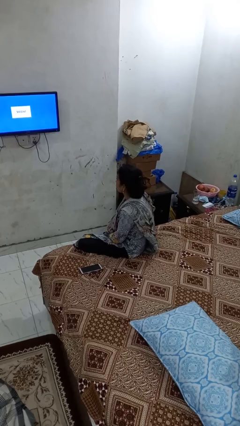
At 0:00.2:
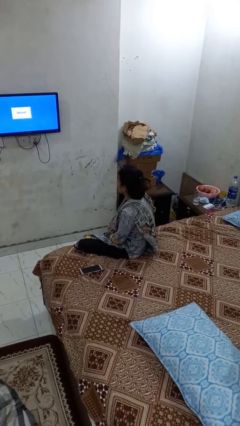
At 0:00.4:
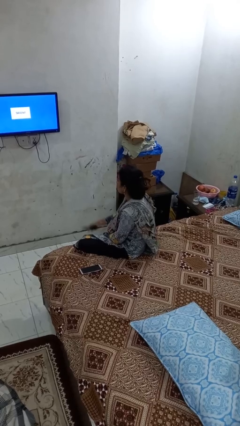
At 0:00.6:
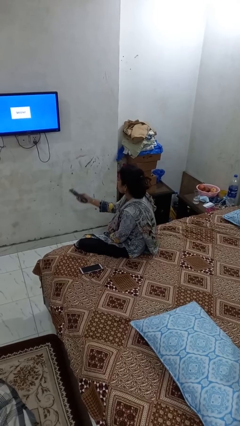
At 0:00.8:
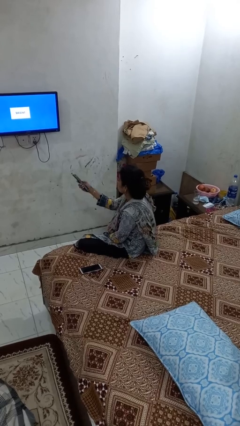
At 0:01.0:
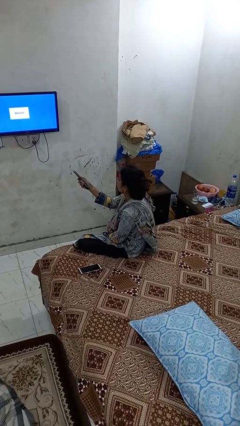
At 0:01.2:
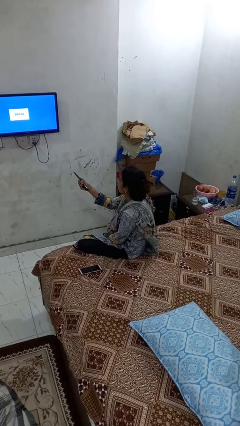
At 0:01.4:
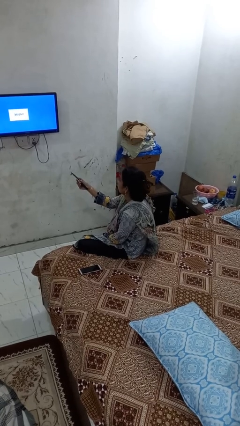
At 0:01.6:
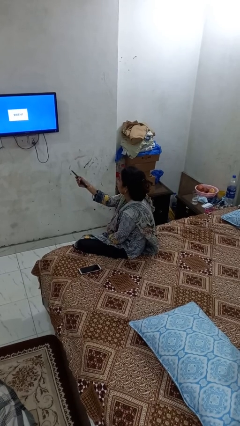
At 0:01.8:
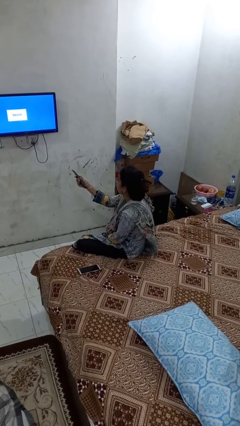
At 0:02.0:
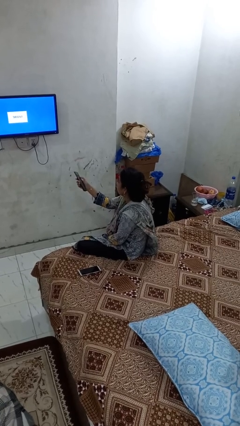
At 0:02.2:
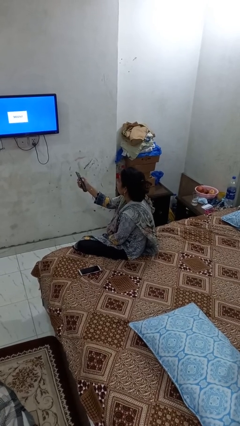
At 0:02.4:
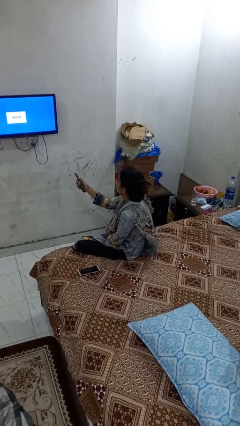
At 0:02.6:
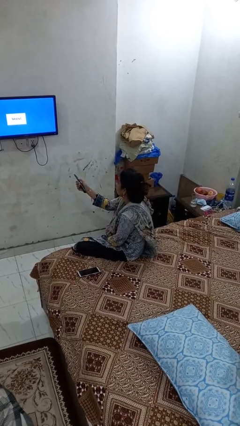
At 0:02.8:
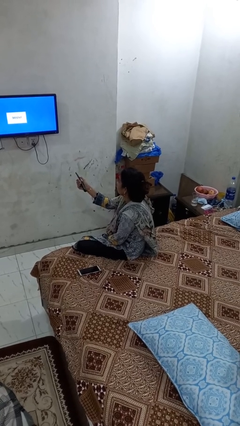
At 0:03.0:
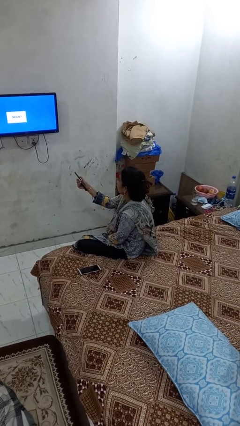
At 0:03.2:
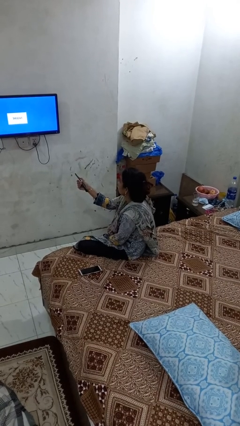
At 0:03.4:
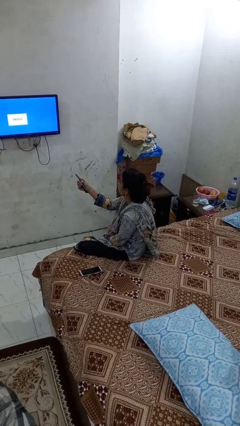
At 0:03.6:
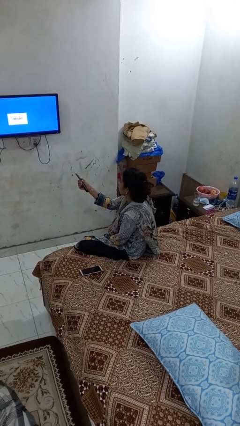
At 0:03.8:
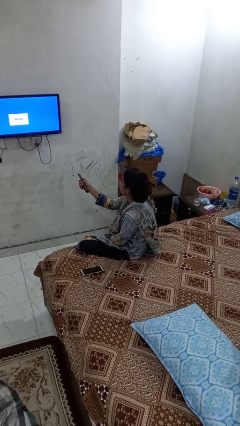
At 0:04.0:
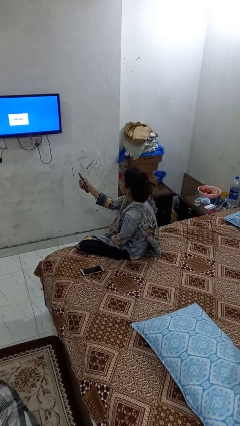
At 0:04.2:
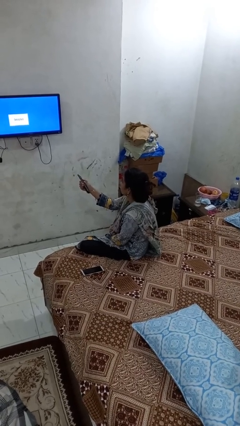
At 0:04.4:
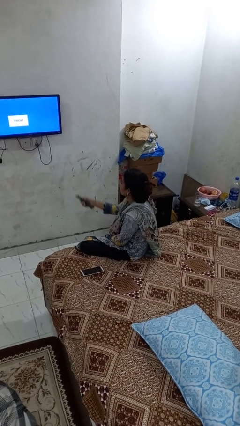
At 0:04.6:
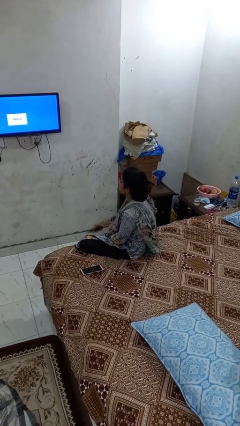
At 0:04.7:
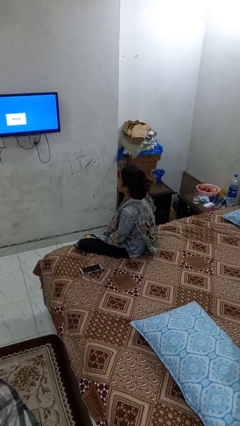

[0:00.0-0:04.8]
person uses television remote

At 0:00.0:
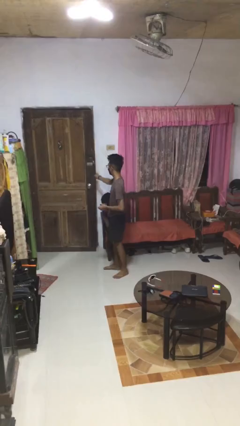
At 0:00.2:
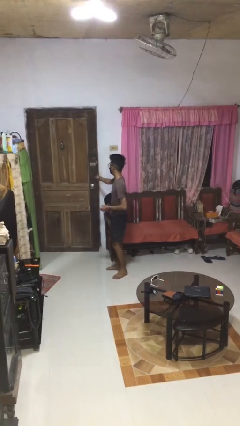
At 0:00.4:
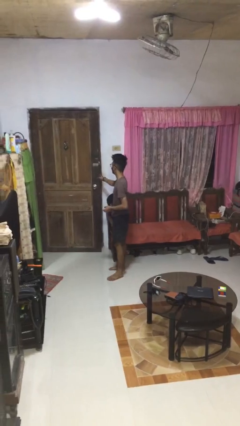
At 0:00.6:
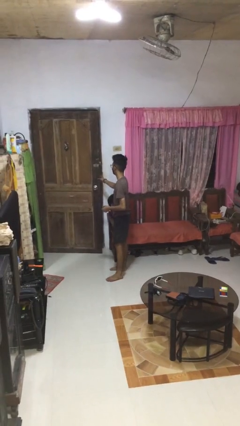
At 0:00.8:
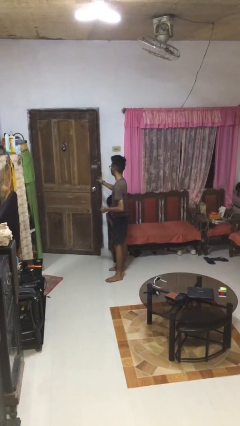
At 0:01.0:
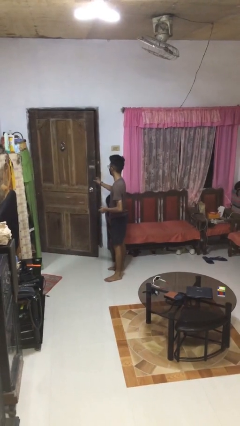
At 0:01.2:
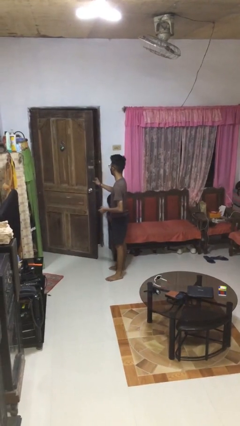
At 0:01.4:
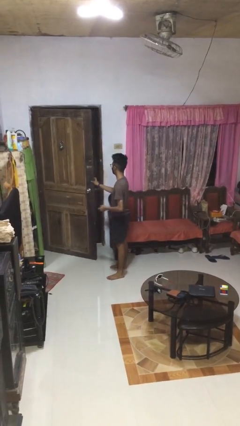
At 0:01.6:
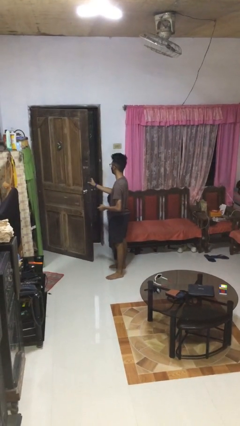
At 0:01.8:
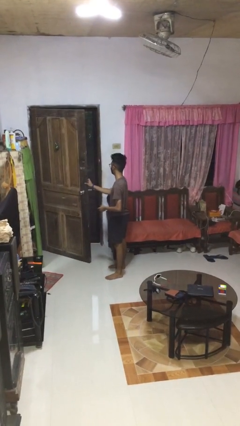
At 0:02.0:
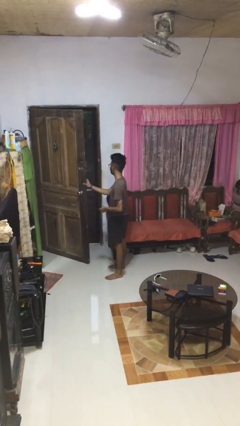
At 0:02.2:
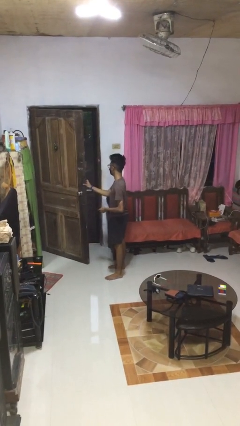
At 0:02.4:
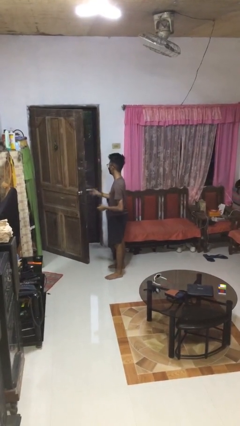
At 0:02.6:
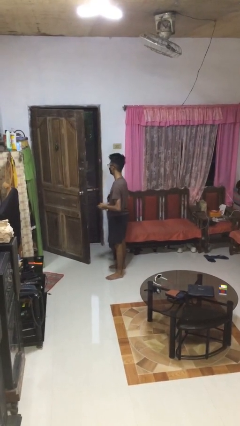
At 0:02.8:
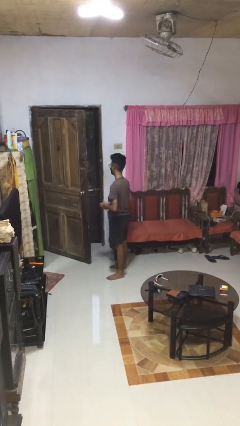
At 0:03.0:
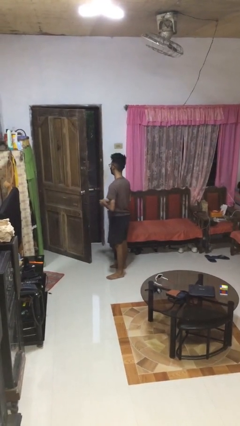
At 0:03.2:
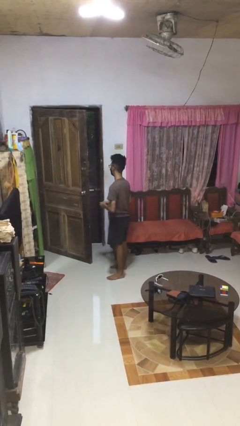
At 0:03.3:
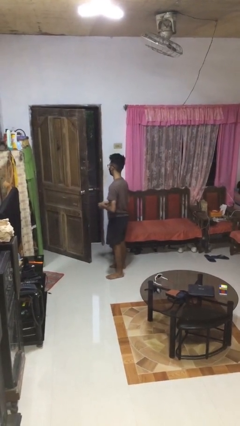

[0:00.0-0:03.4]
person opens facility door

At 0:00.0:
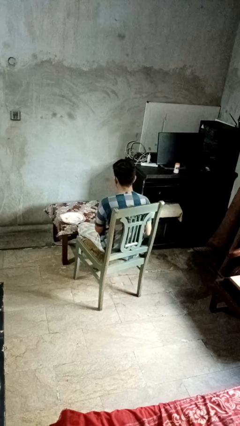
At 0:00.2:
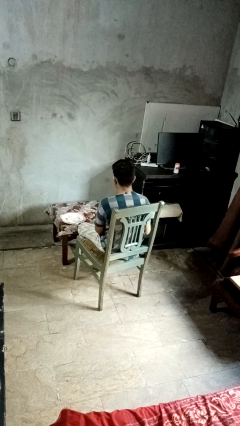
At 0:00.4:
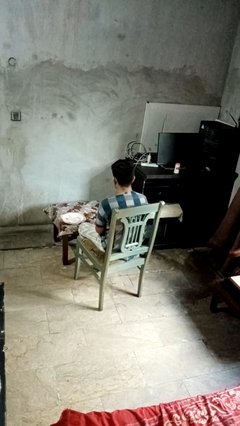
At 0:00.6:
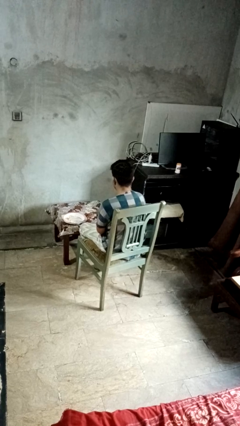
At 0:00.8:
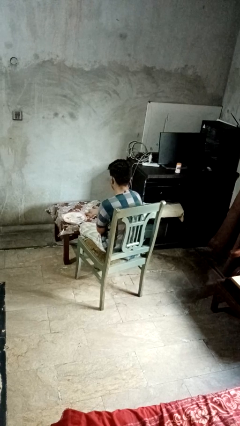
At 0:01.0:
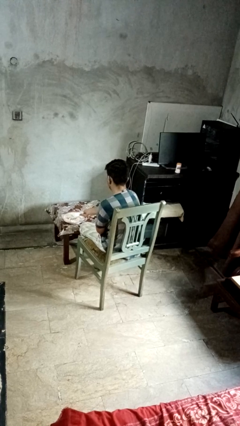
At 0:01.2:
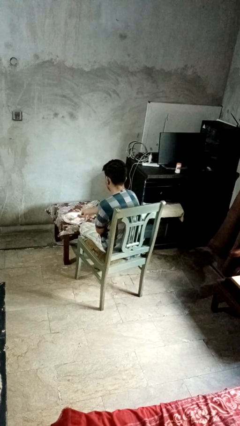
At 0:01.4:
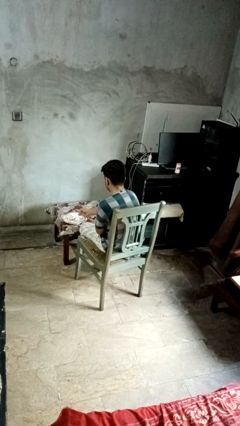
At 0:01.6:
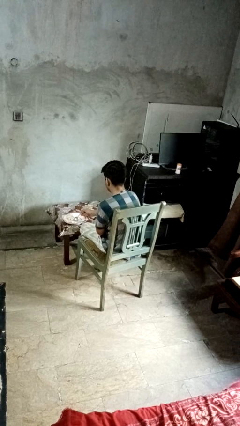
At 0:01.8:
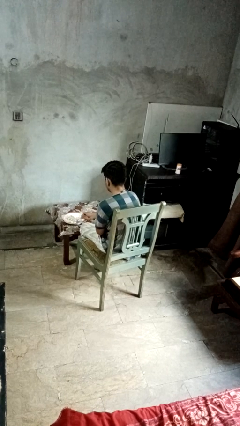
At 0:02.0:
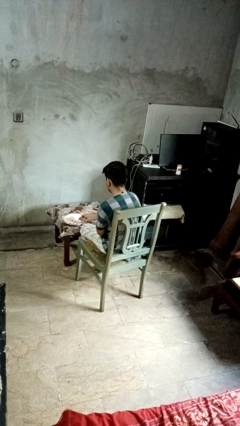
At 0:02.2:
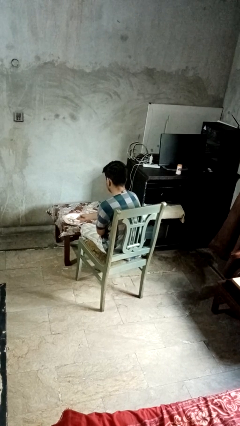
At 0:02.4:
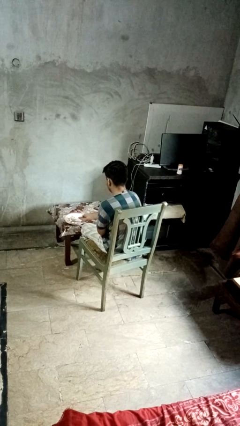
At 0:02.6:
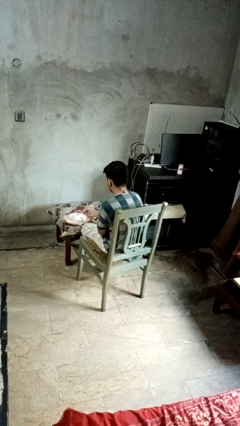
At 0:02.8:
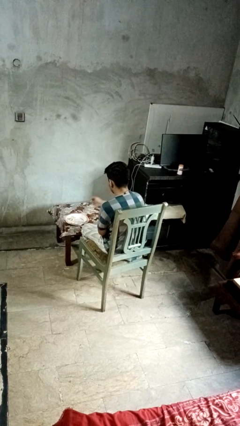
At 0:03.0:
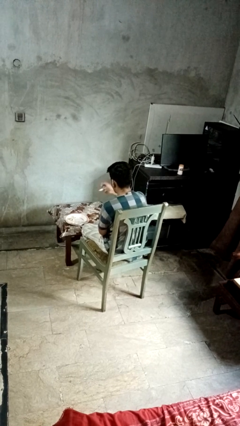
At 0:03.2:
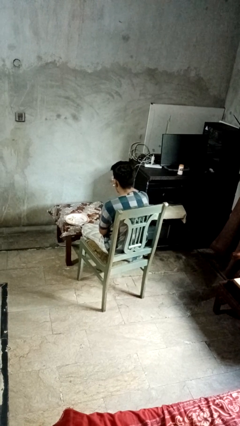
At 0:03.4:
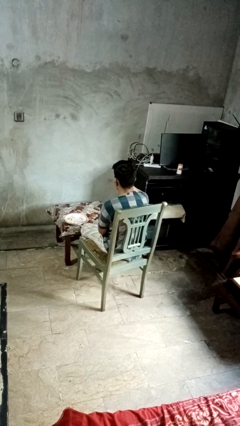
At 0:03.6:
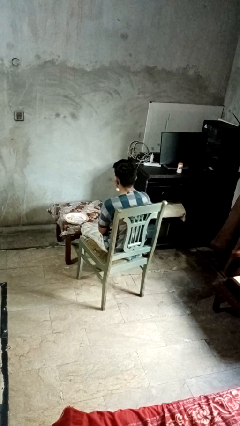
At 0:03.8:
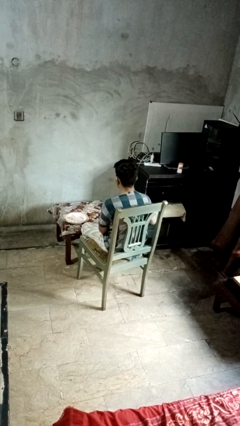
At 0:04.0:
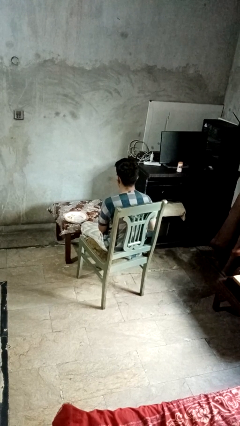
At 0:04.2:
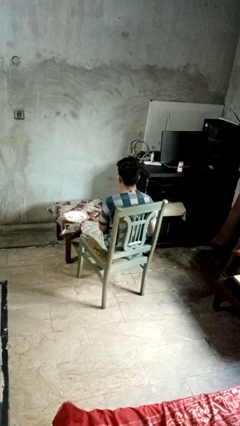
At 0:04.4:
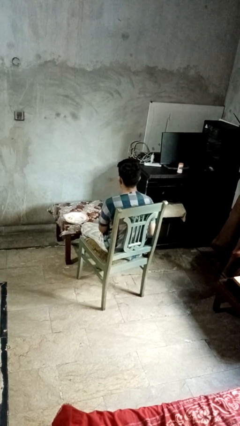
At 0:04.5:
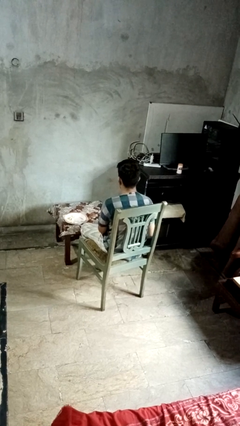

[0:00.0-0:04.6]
person eats with utensil

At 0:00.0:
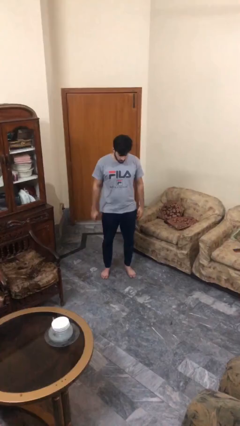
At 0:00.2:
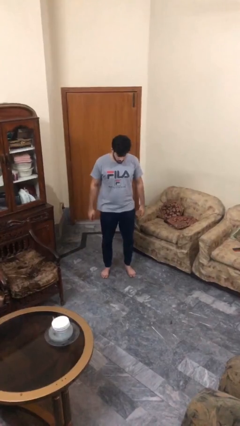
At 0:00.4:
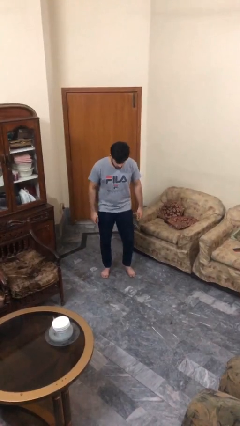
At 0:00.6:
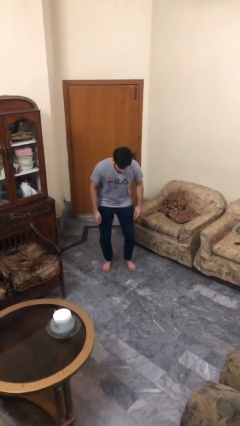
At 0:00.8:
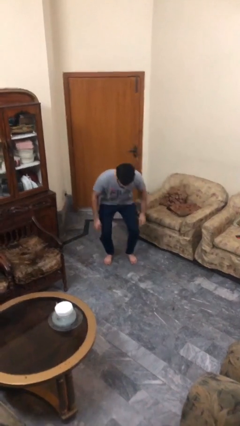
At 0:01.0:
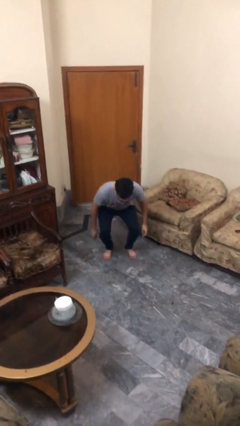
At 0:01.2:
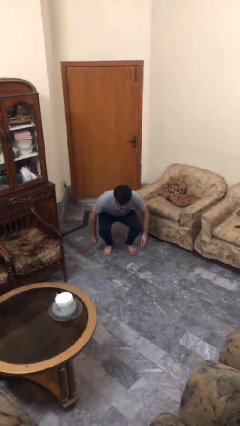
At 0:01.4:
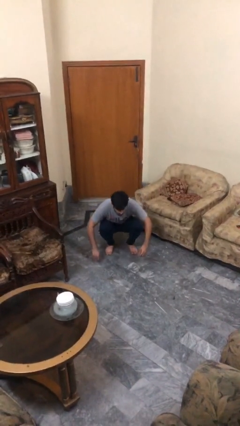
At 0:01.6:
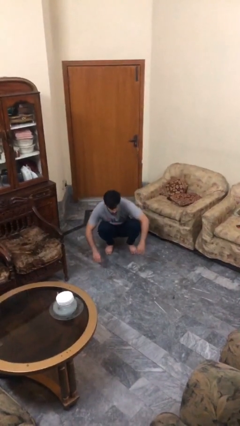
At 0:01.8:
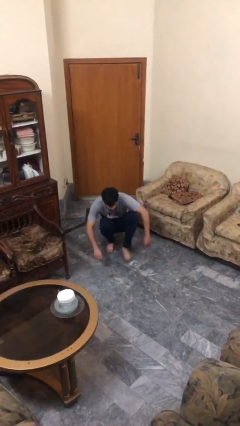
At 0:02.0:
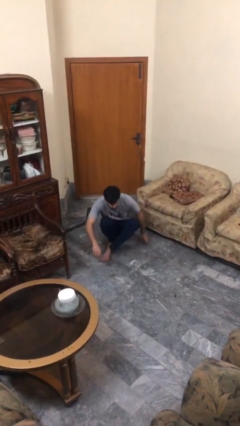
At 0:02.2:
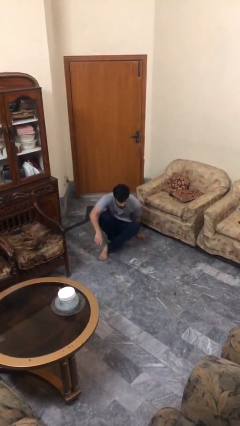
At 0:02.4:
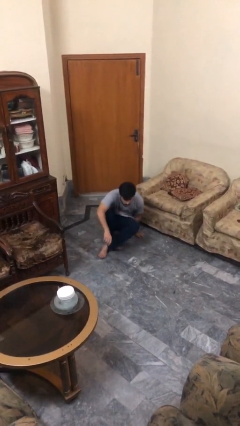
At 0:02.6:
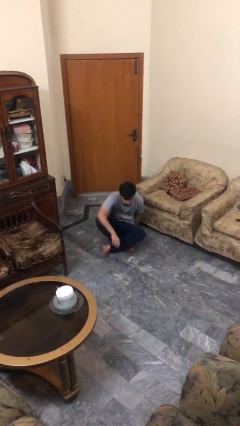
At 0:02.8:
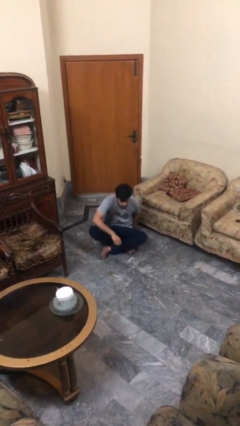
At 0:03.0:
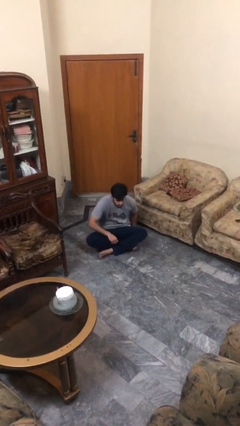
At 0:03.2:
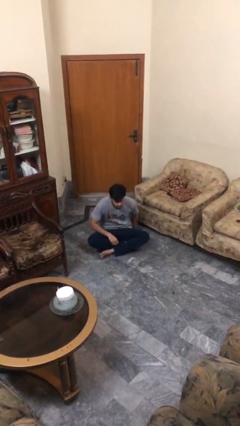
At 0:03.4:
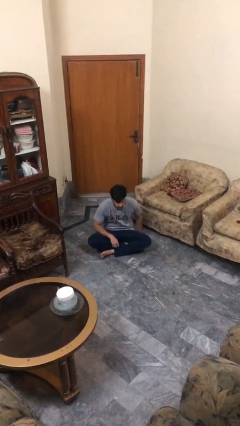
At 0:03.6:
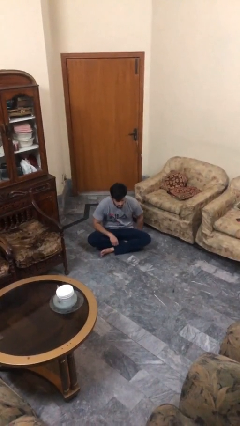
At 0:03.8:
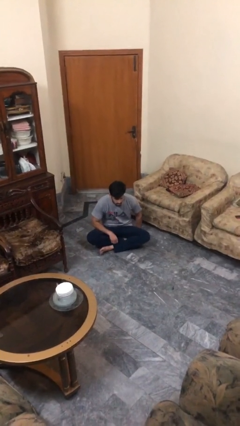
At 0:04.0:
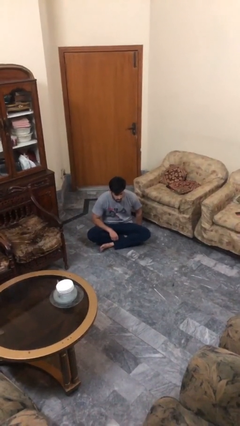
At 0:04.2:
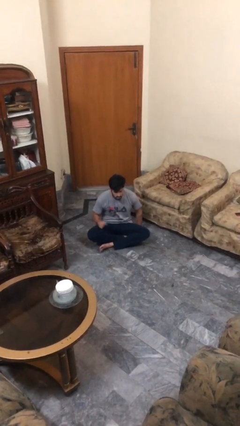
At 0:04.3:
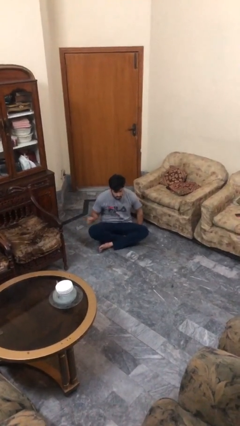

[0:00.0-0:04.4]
person sits crisscross

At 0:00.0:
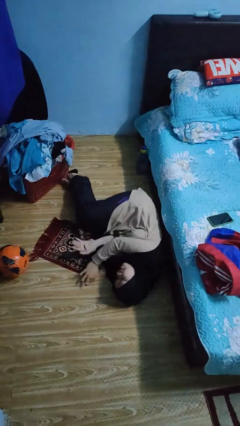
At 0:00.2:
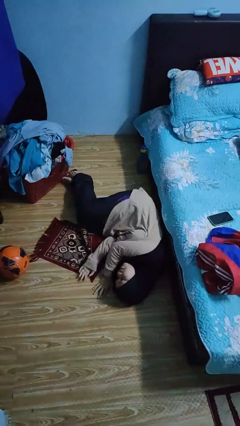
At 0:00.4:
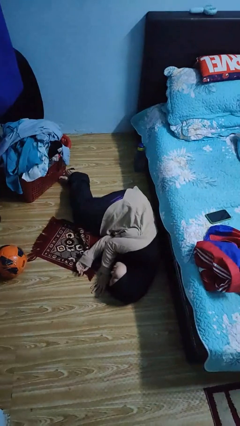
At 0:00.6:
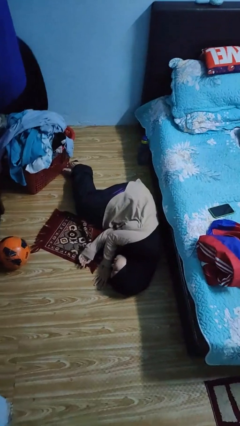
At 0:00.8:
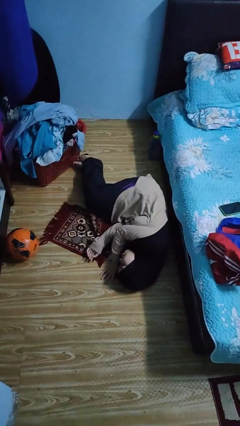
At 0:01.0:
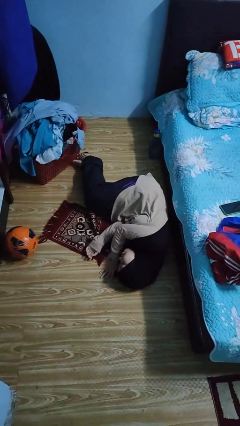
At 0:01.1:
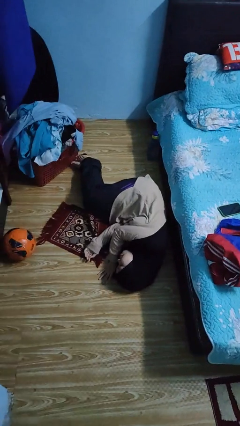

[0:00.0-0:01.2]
person lies down on floor
